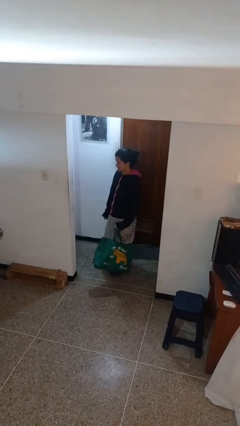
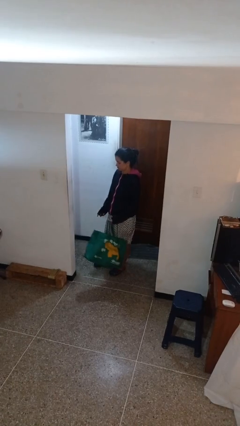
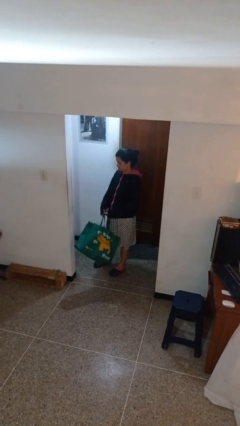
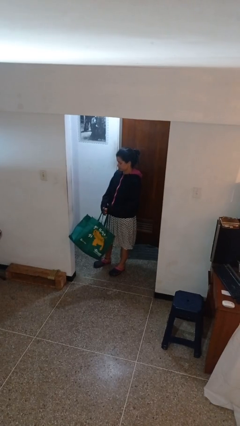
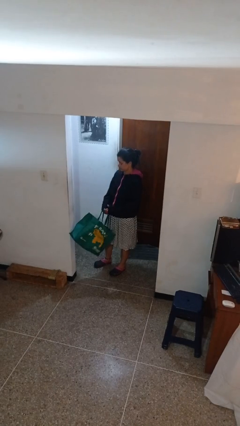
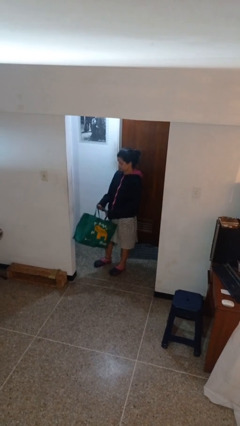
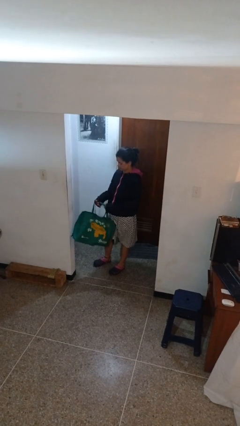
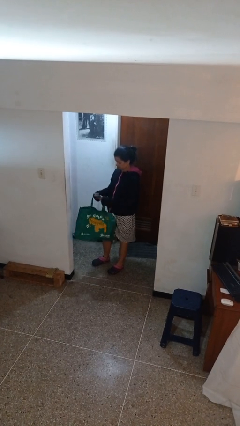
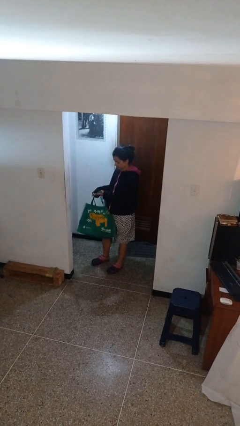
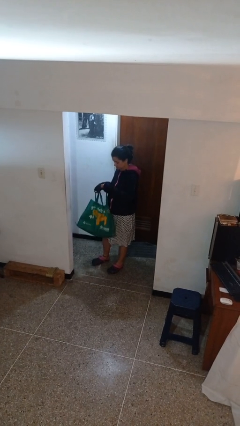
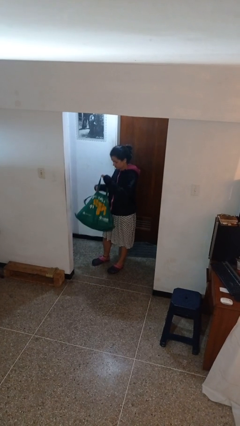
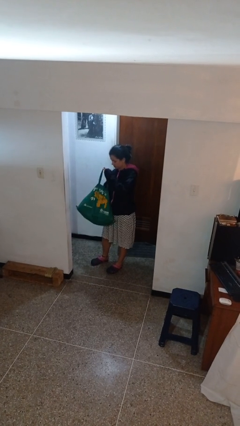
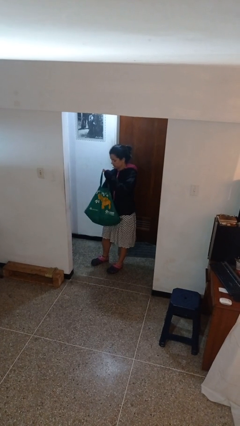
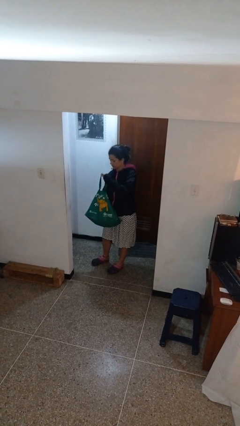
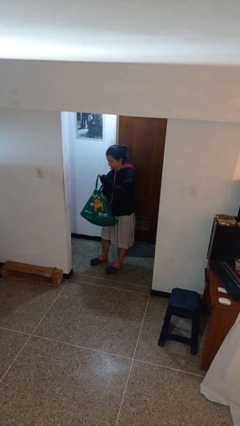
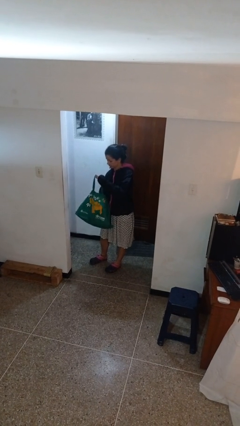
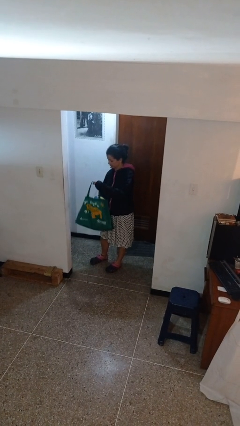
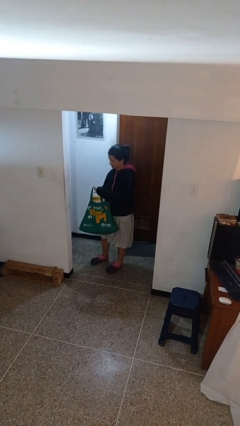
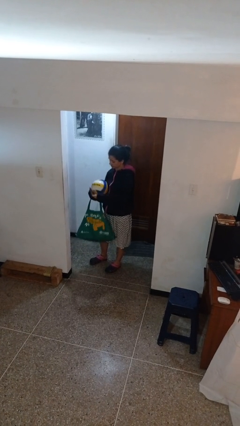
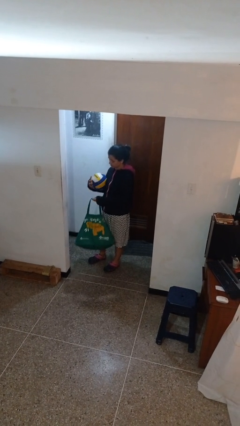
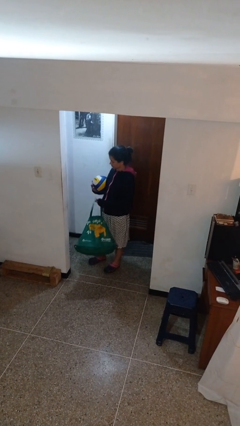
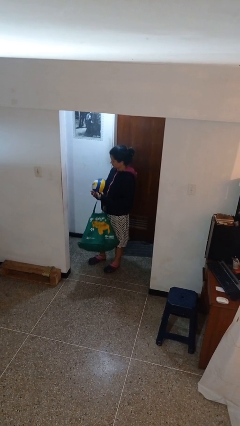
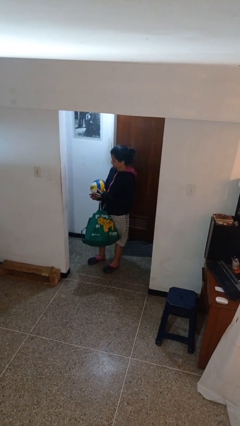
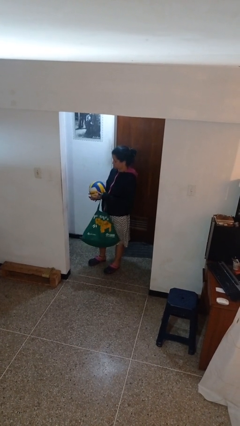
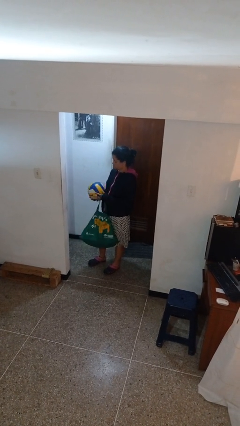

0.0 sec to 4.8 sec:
person takes object from bag

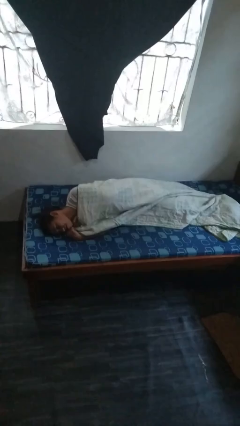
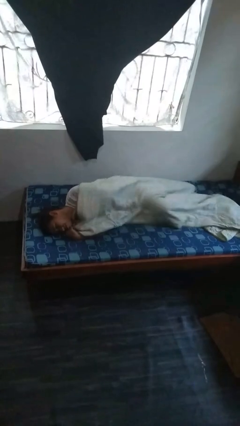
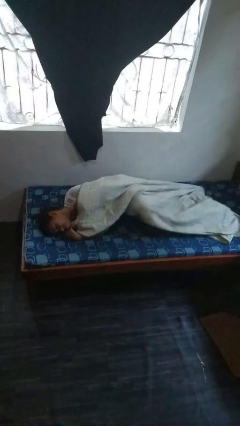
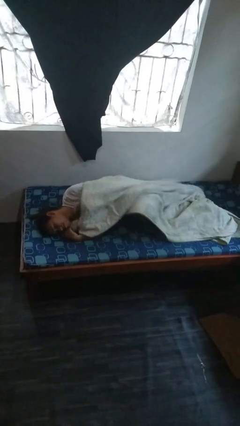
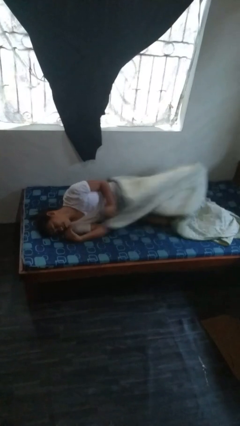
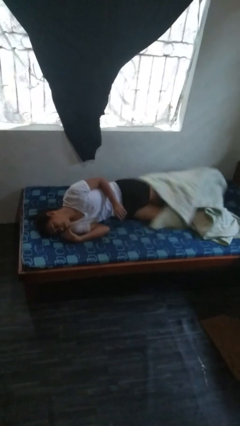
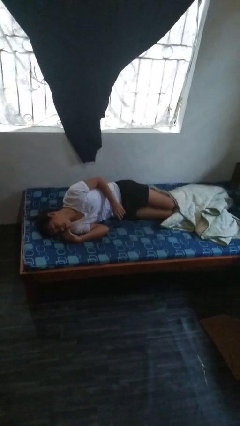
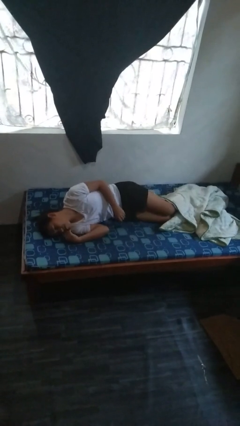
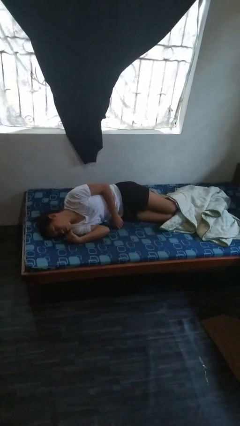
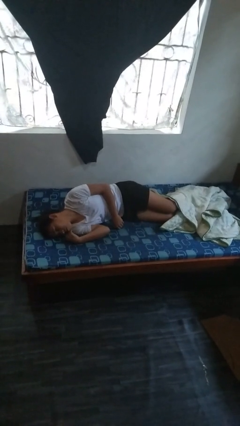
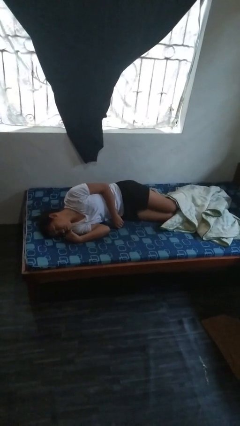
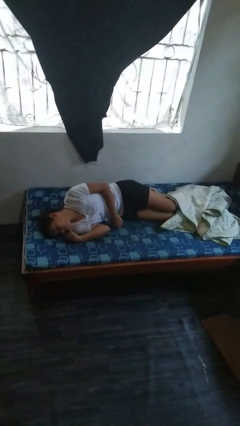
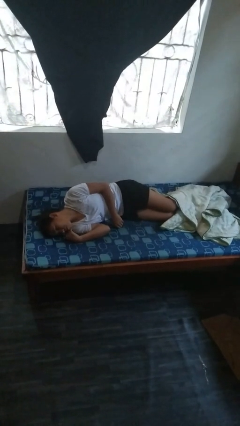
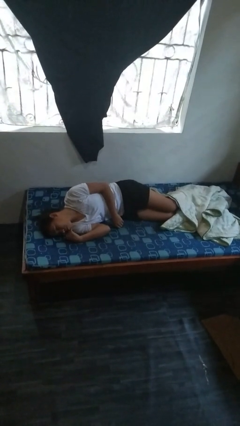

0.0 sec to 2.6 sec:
person uncovers with bedsheets

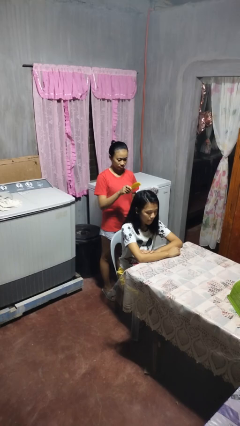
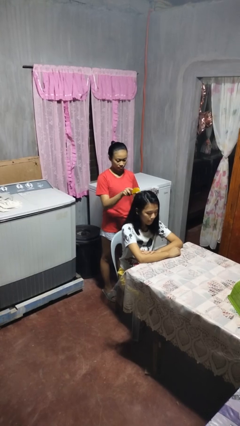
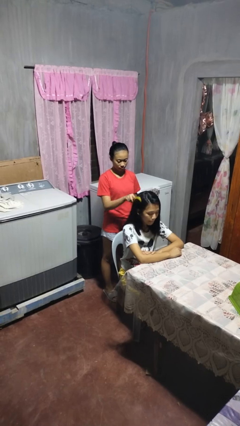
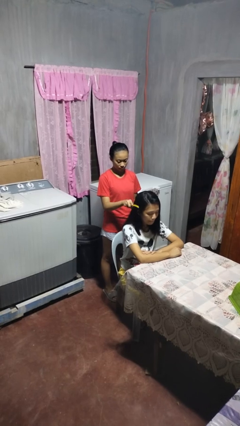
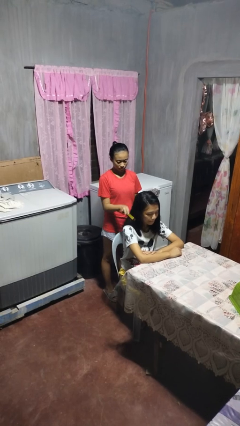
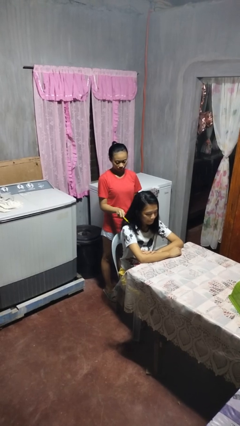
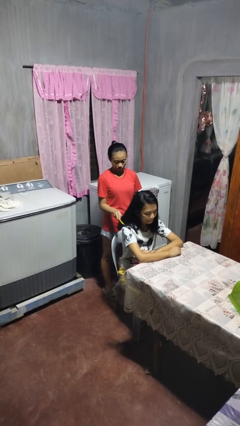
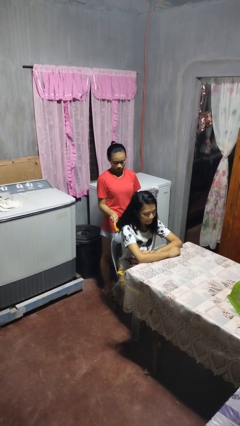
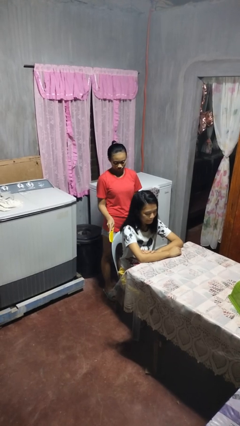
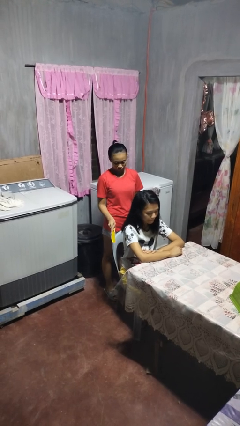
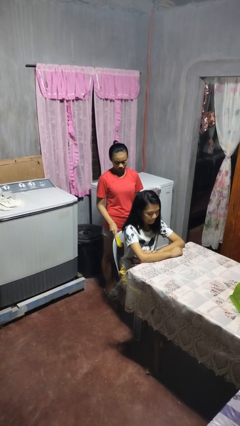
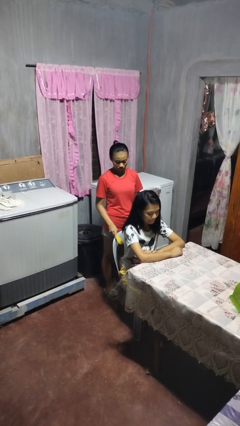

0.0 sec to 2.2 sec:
person brushes hair of person

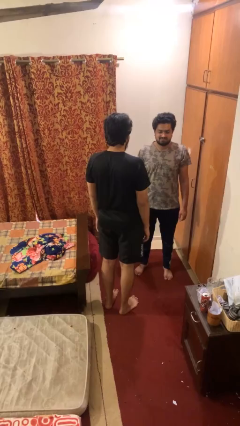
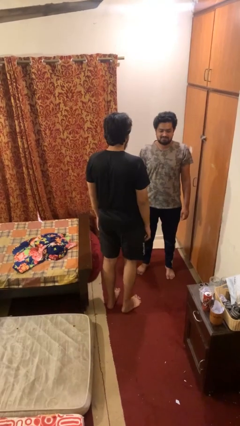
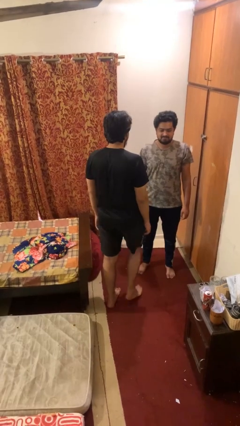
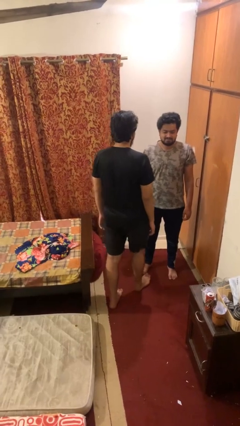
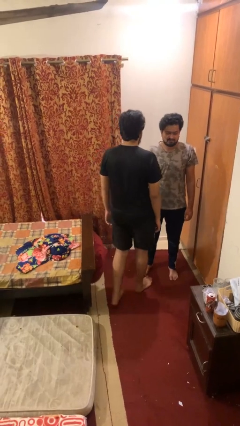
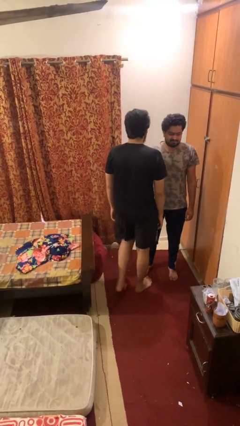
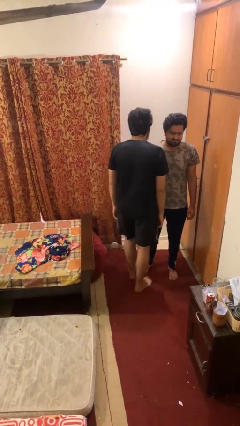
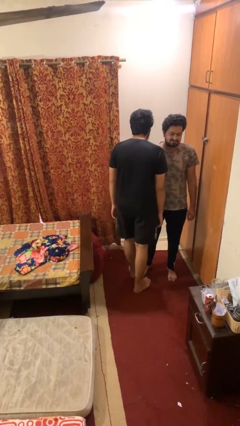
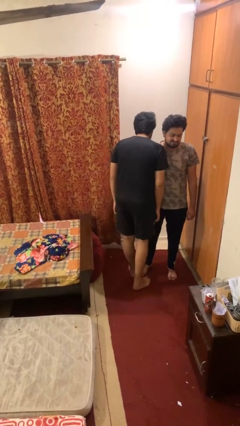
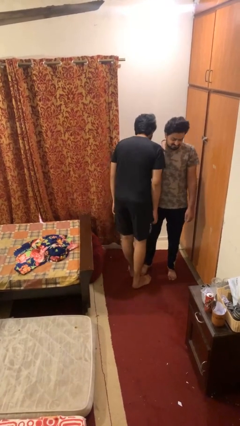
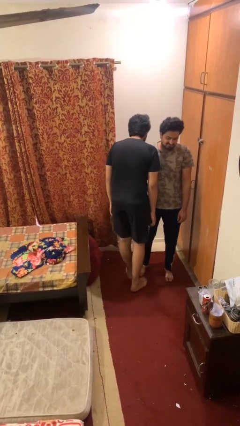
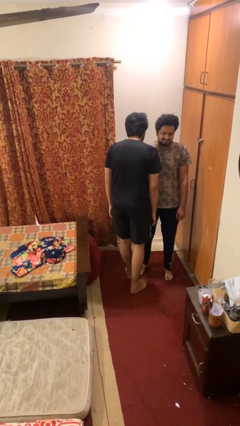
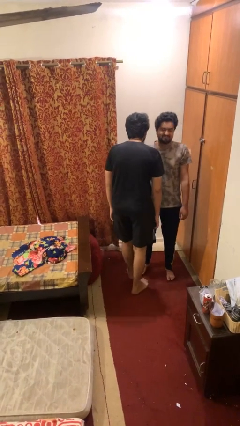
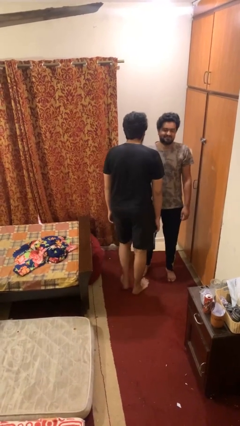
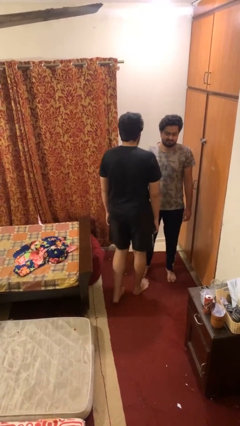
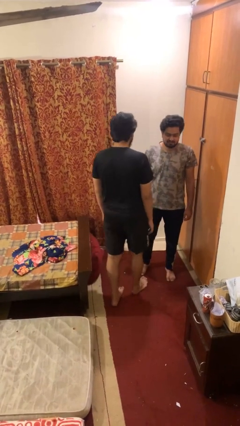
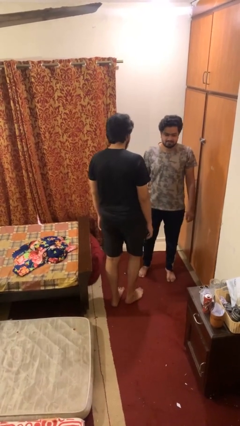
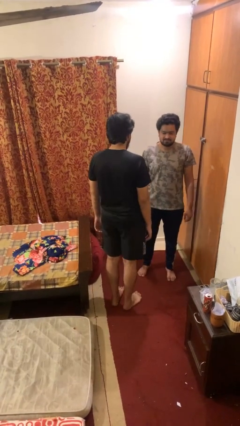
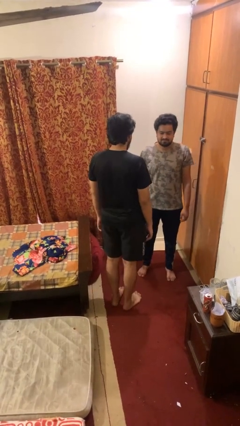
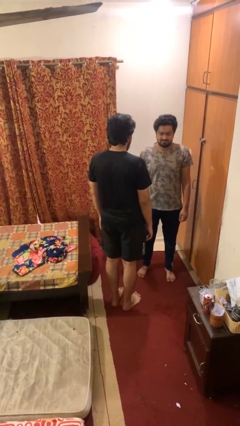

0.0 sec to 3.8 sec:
person bumps into person

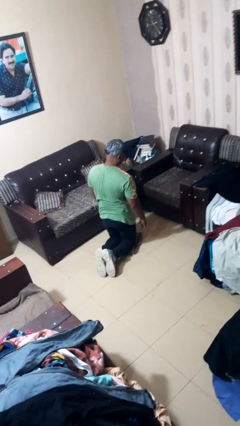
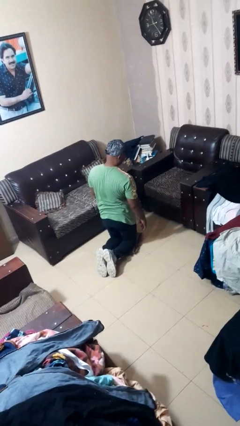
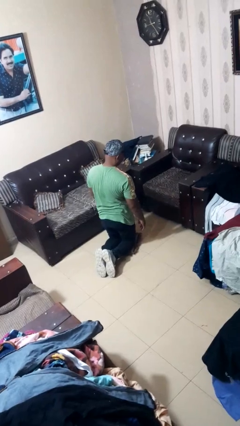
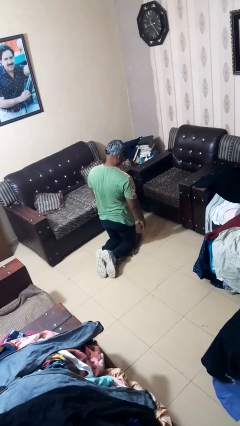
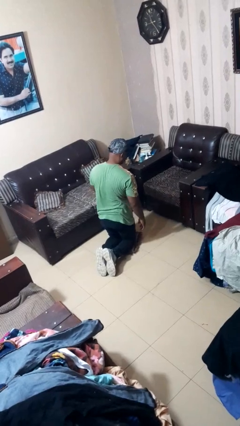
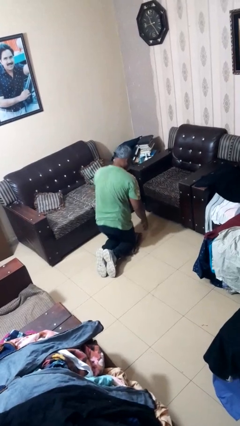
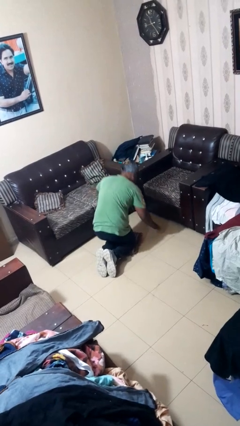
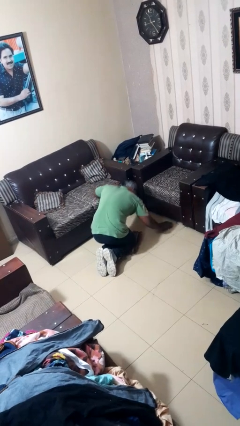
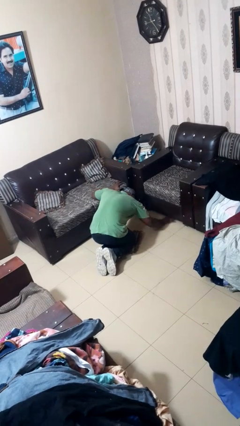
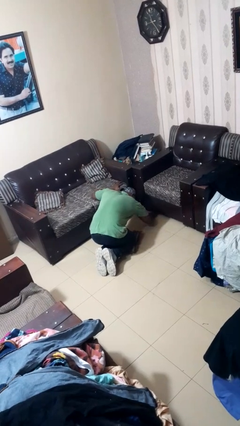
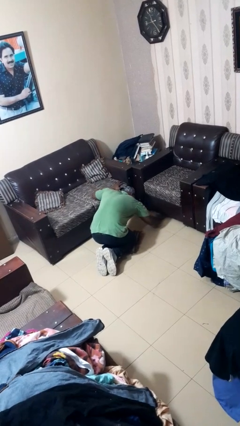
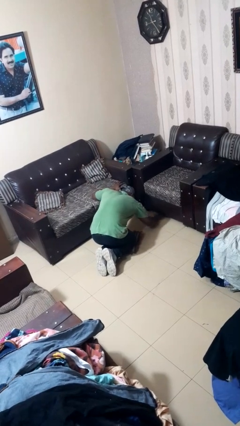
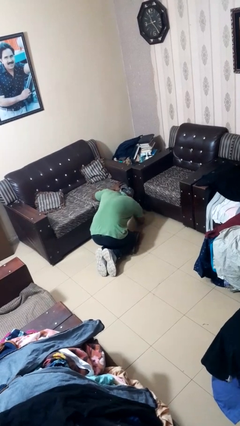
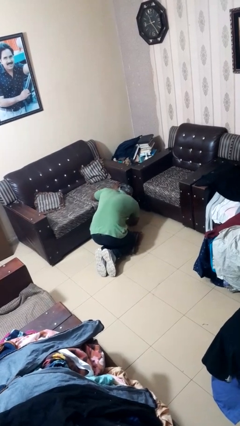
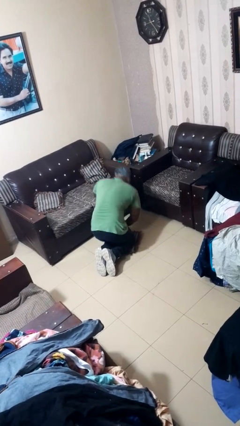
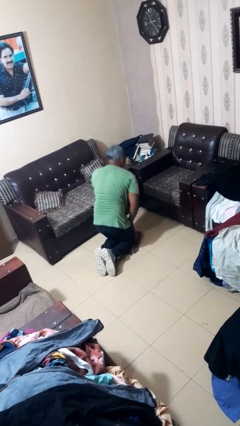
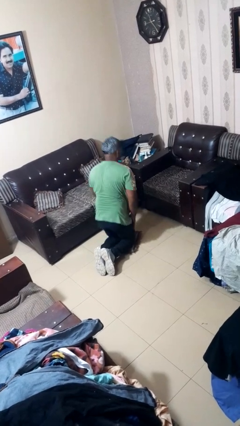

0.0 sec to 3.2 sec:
person searches under couch

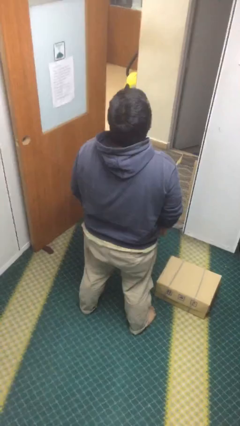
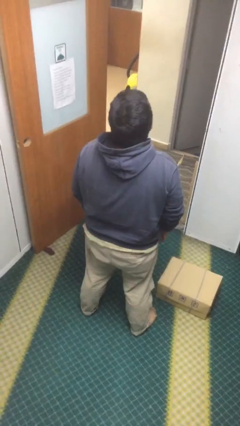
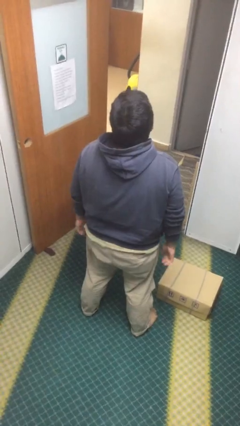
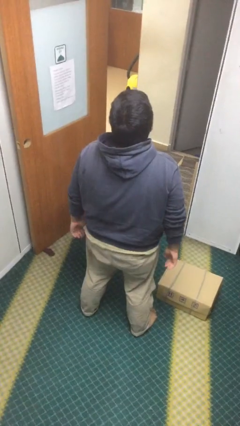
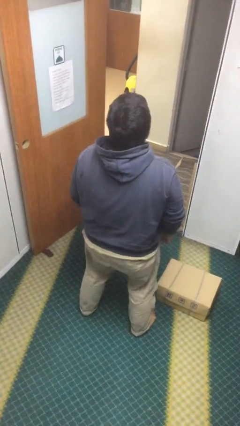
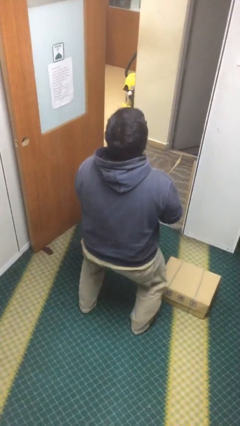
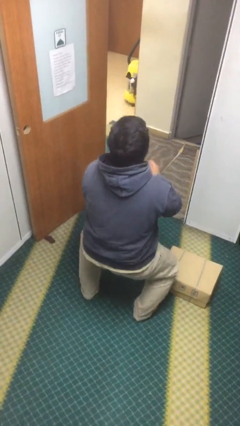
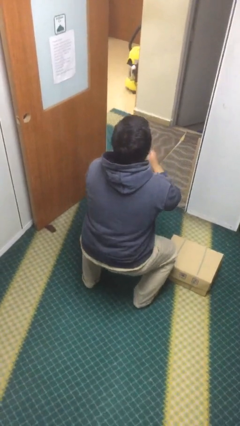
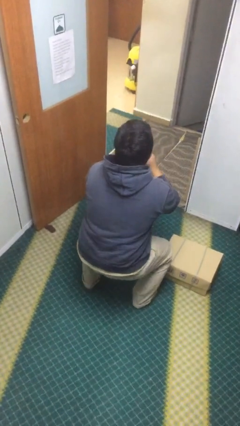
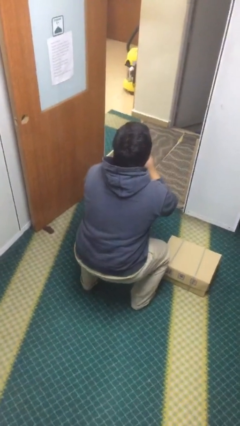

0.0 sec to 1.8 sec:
person squats
